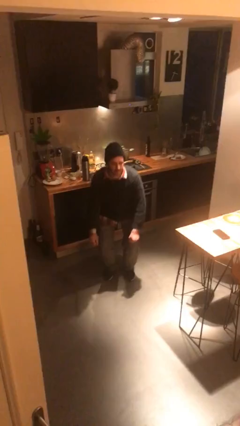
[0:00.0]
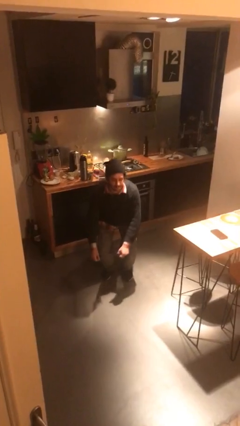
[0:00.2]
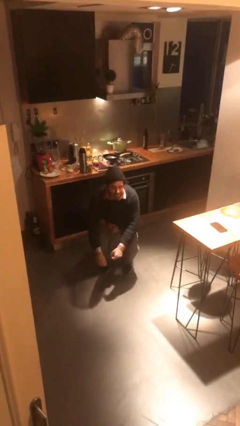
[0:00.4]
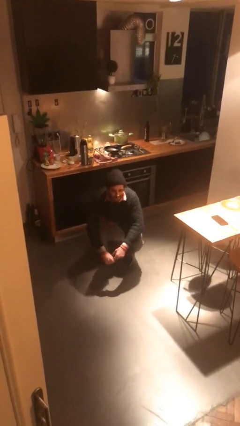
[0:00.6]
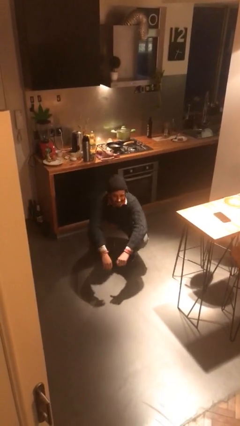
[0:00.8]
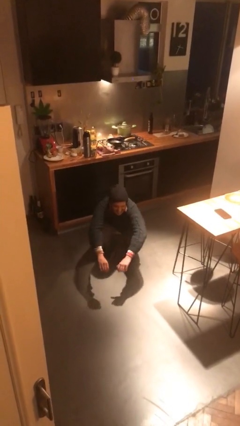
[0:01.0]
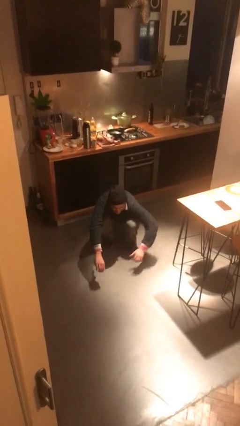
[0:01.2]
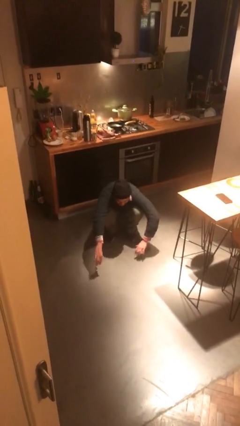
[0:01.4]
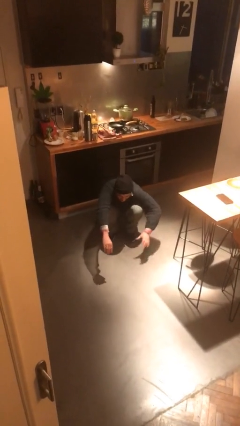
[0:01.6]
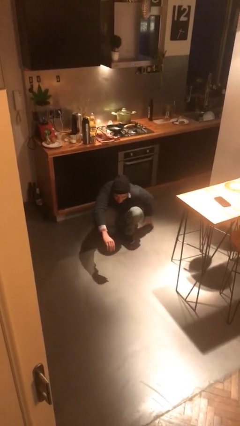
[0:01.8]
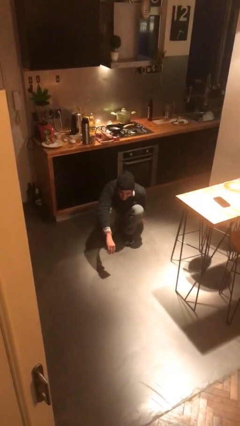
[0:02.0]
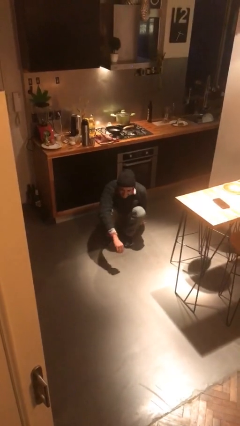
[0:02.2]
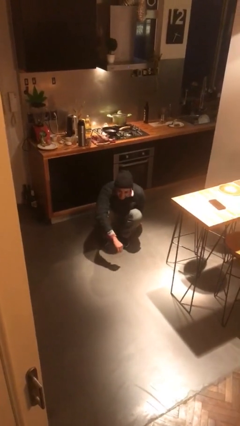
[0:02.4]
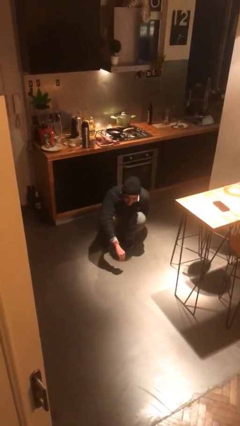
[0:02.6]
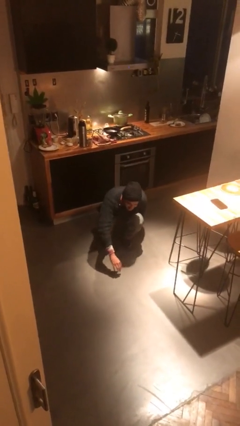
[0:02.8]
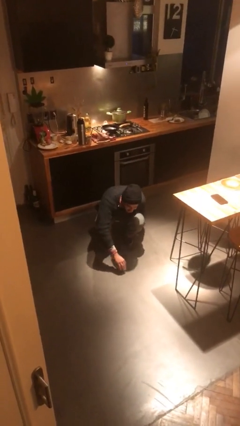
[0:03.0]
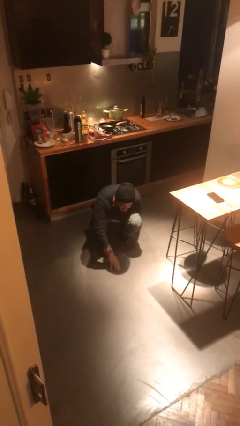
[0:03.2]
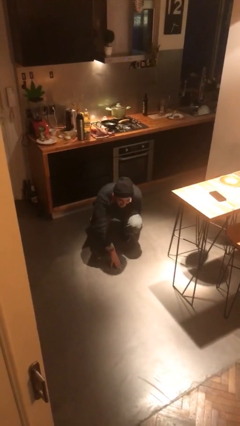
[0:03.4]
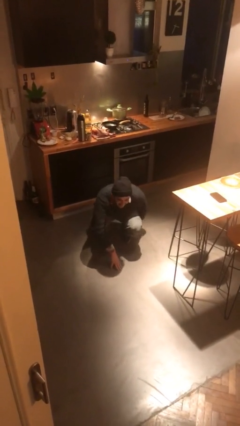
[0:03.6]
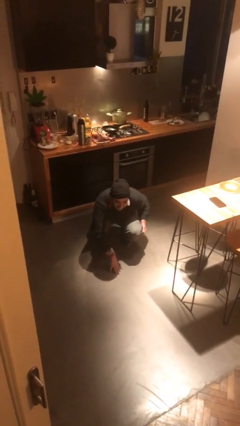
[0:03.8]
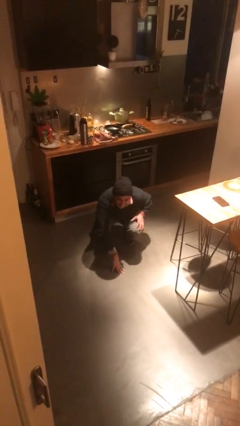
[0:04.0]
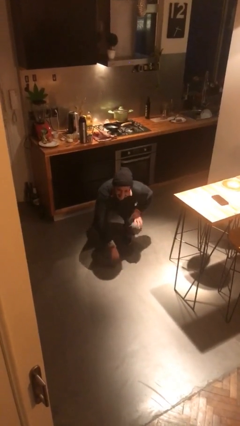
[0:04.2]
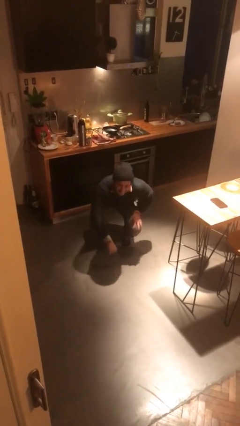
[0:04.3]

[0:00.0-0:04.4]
person squats

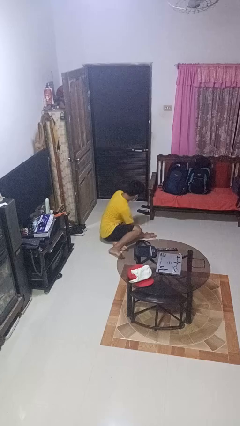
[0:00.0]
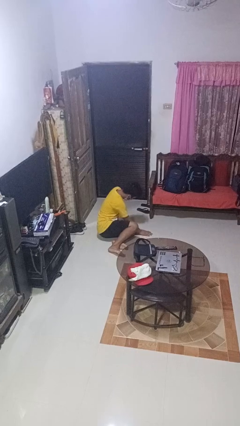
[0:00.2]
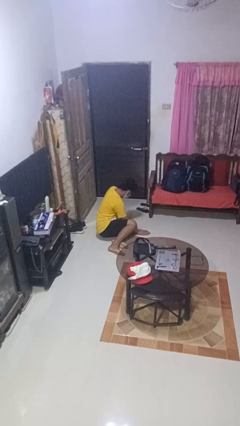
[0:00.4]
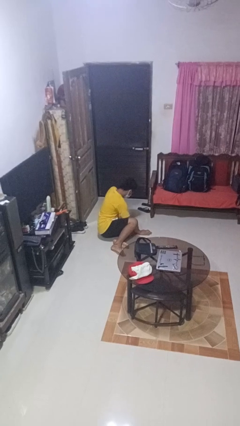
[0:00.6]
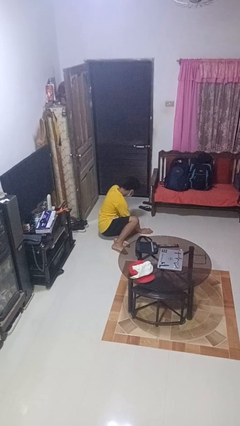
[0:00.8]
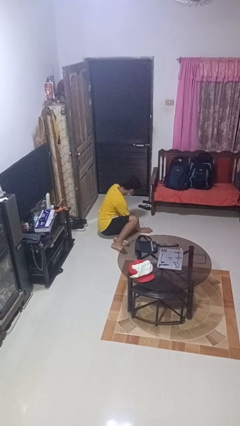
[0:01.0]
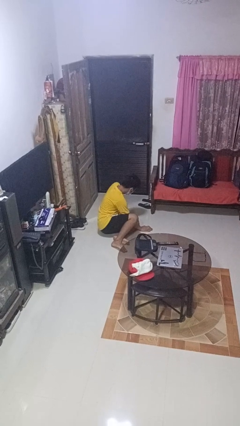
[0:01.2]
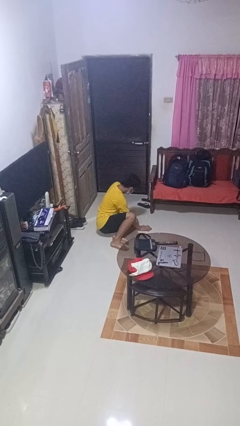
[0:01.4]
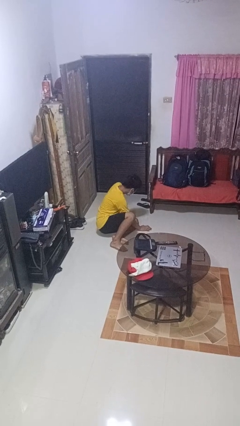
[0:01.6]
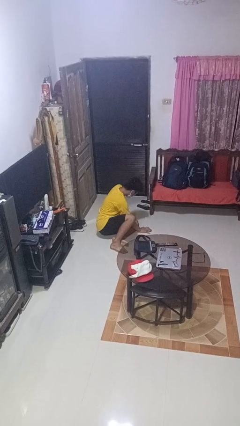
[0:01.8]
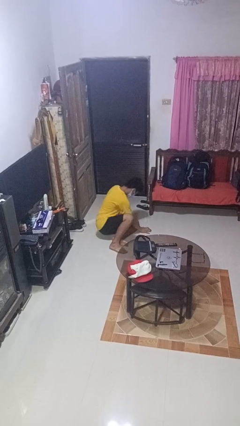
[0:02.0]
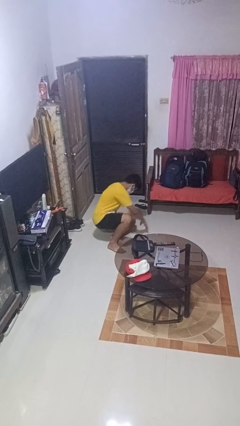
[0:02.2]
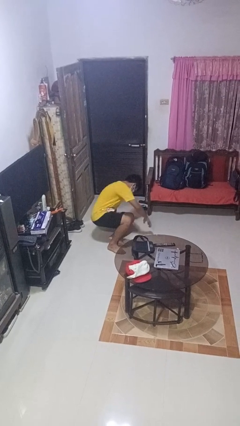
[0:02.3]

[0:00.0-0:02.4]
person lies down on floor

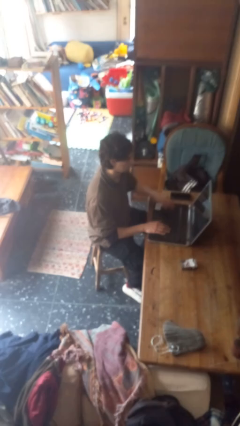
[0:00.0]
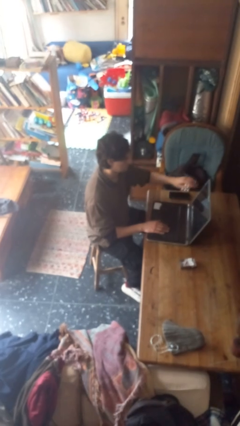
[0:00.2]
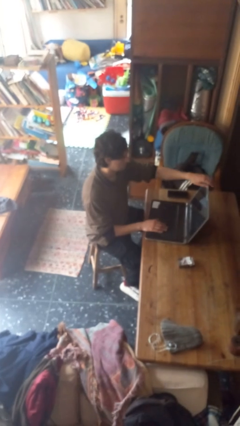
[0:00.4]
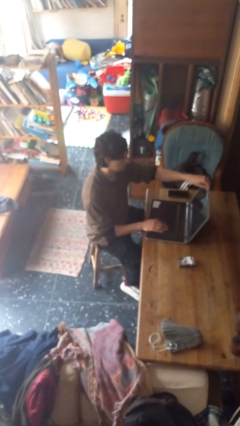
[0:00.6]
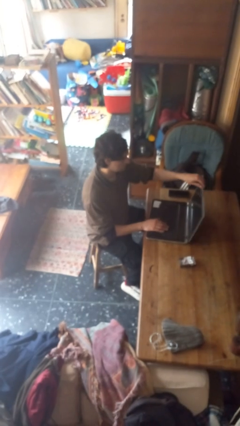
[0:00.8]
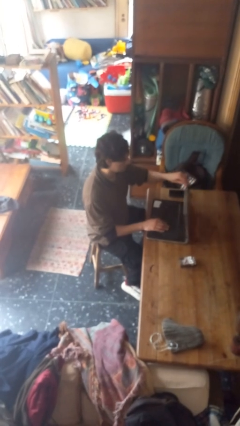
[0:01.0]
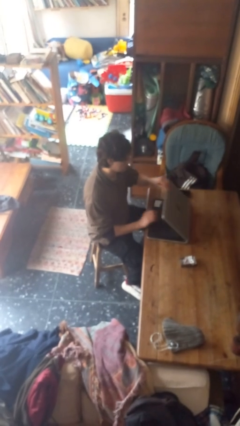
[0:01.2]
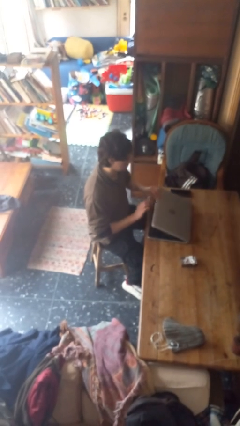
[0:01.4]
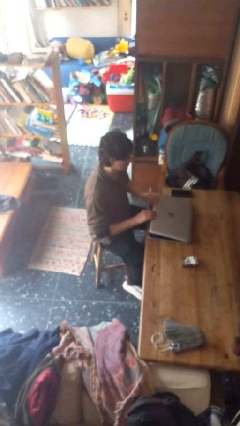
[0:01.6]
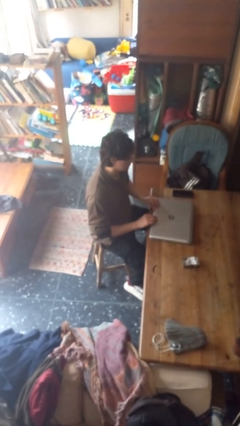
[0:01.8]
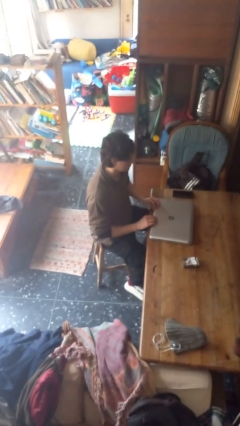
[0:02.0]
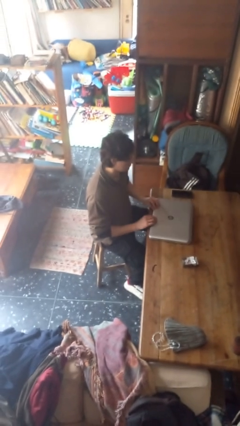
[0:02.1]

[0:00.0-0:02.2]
person closes laptop

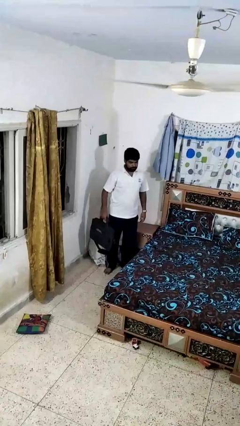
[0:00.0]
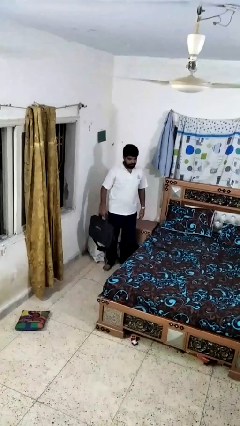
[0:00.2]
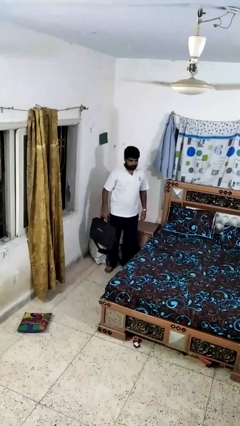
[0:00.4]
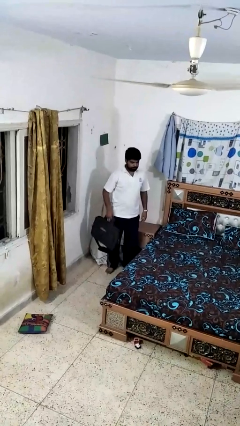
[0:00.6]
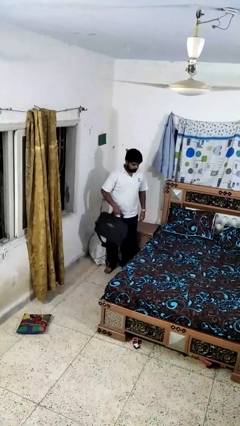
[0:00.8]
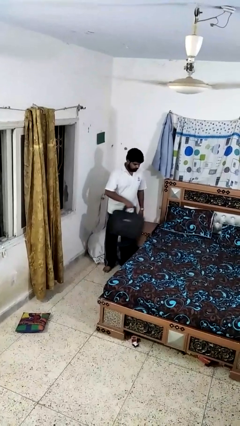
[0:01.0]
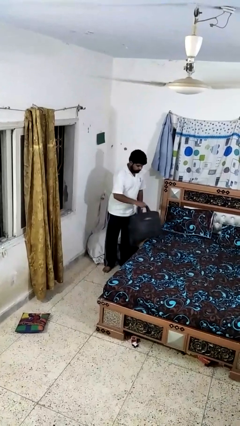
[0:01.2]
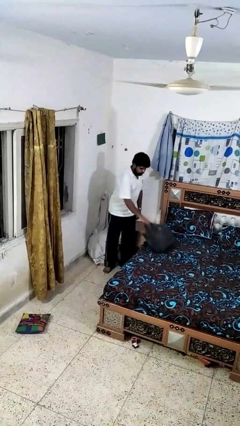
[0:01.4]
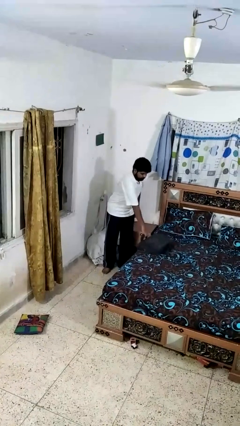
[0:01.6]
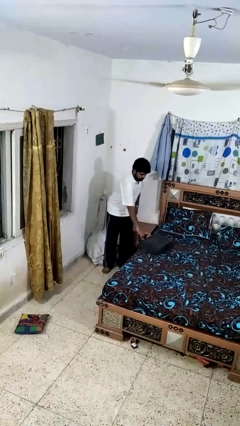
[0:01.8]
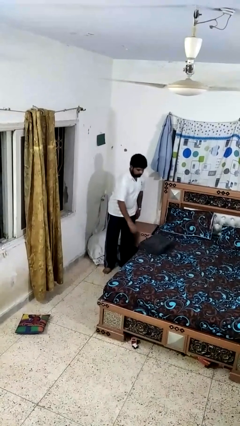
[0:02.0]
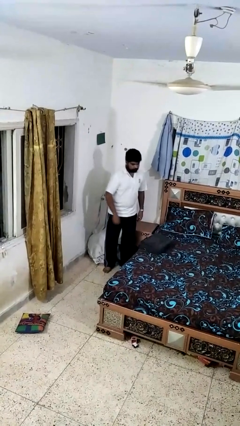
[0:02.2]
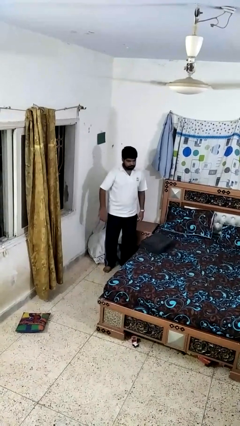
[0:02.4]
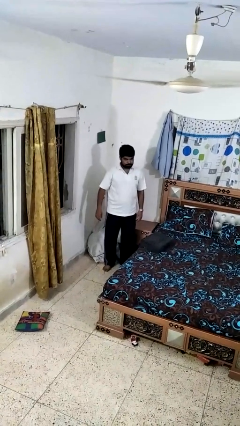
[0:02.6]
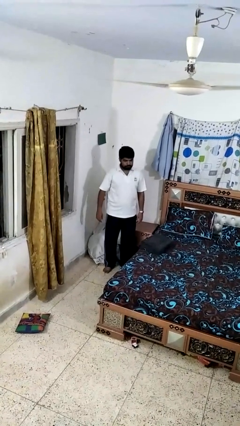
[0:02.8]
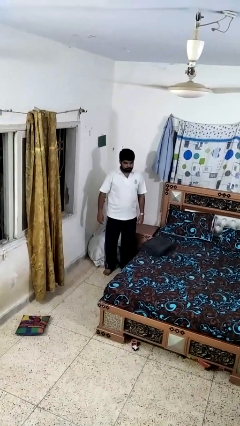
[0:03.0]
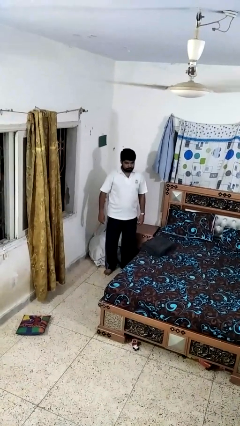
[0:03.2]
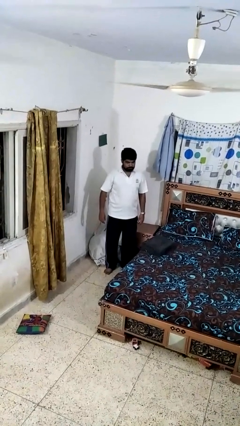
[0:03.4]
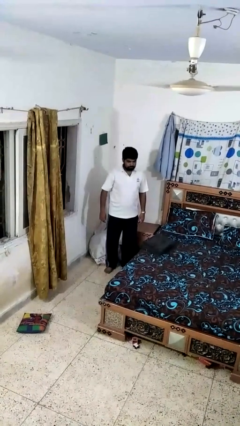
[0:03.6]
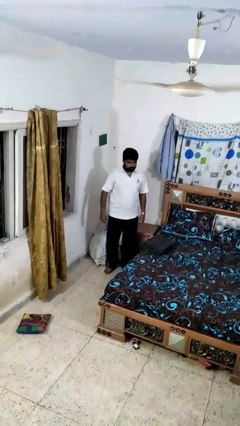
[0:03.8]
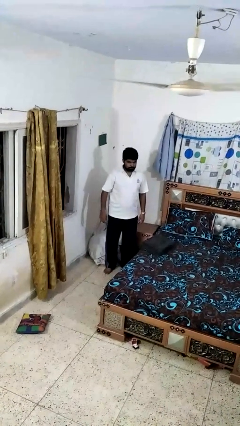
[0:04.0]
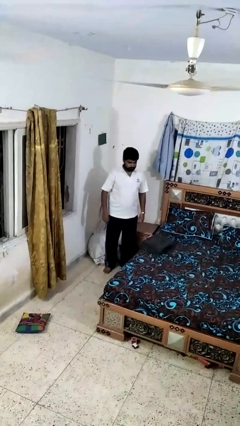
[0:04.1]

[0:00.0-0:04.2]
person puts down object on bed

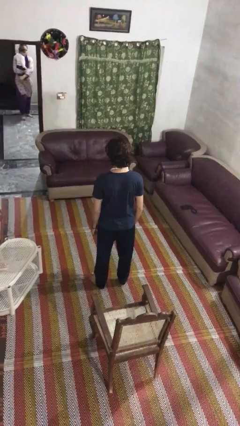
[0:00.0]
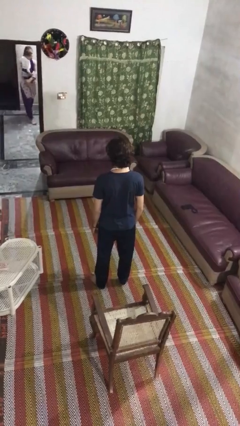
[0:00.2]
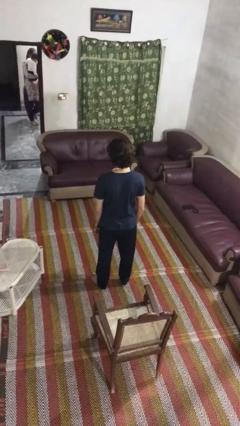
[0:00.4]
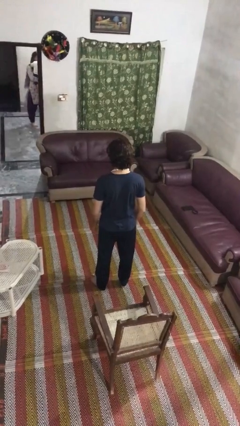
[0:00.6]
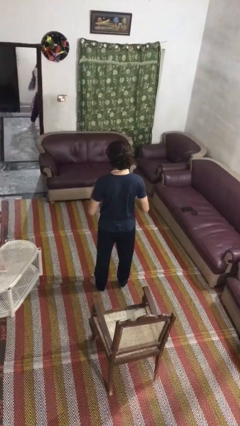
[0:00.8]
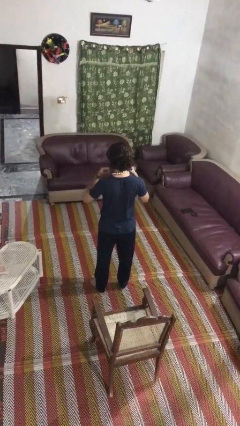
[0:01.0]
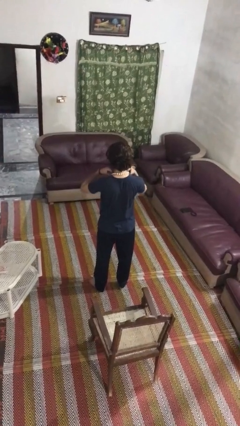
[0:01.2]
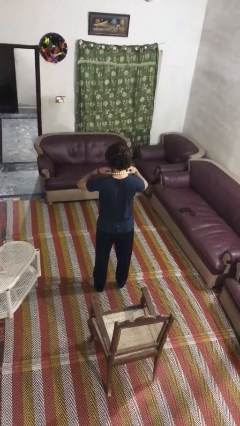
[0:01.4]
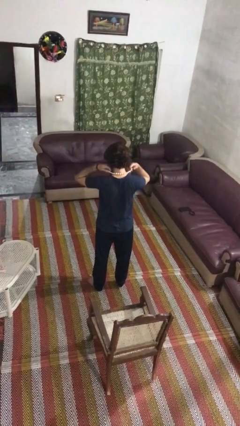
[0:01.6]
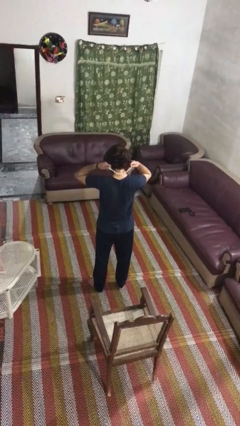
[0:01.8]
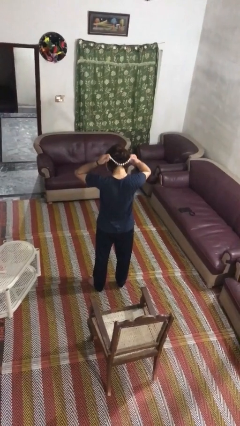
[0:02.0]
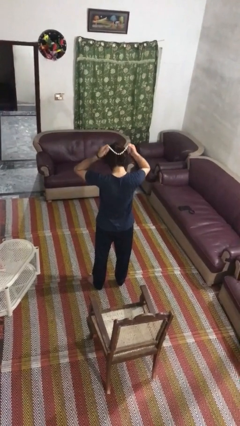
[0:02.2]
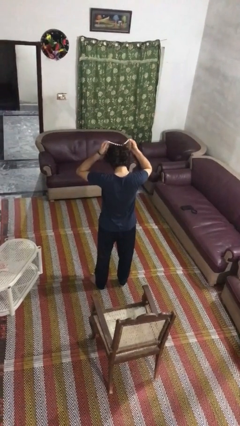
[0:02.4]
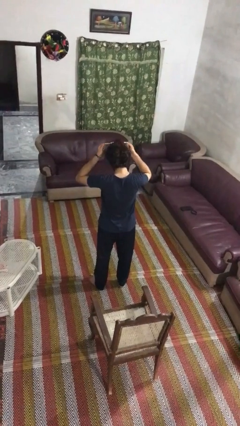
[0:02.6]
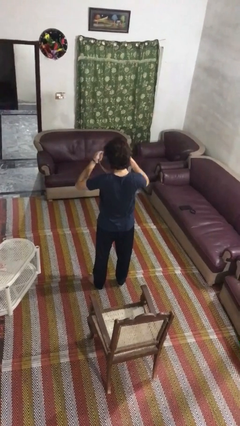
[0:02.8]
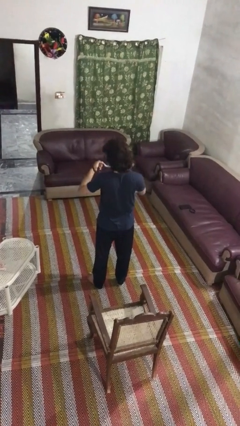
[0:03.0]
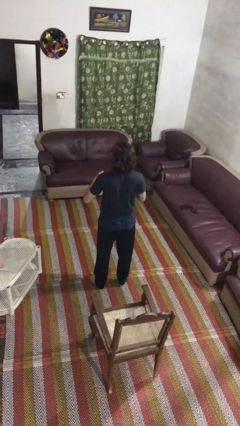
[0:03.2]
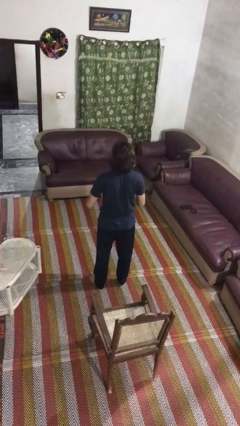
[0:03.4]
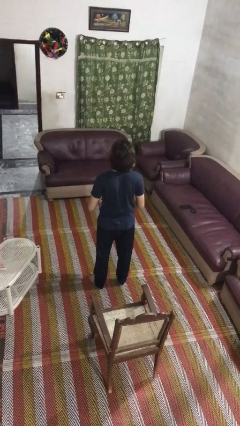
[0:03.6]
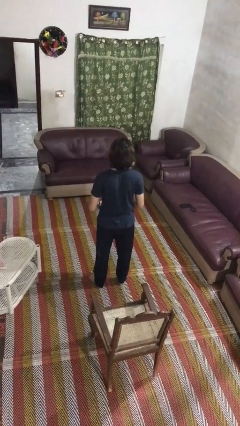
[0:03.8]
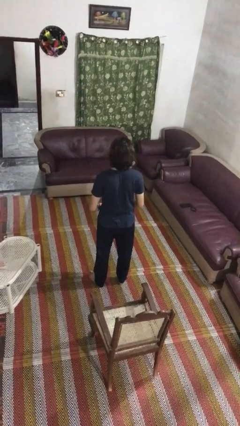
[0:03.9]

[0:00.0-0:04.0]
person takes off necklace

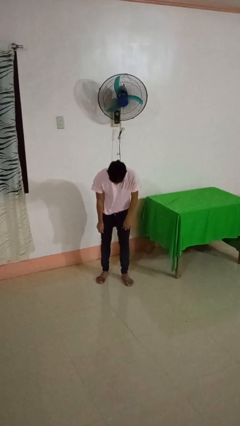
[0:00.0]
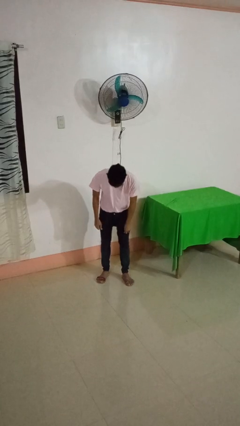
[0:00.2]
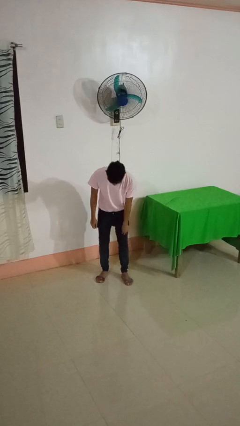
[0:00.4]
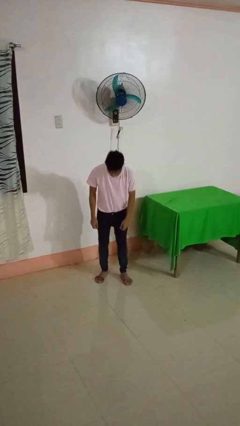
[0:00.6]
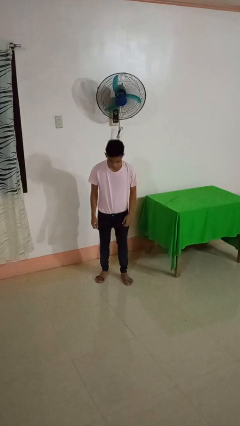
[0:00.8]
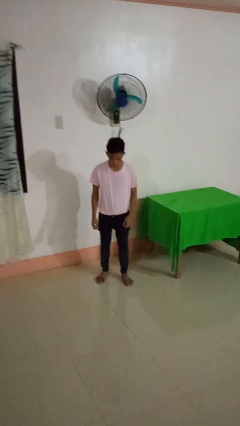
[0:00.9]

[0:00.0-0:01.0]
person hikes up pants
